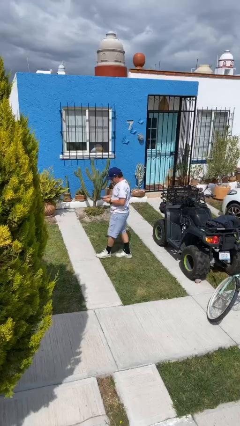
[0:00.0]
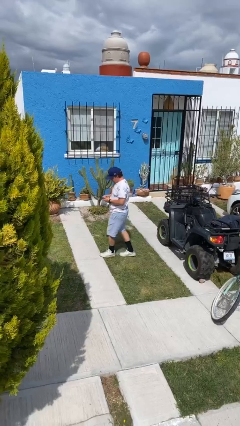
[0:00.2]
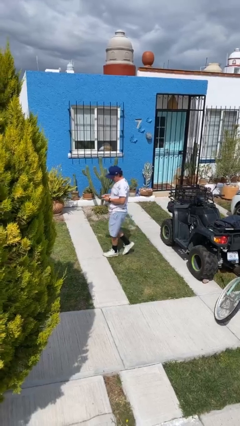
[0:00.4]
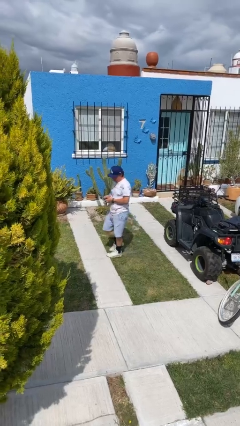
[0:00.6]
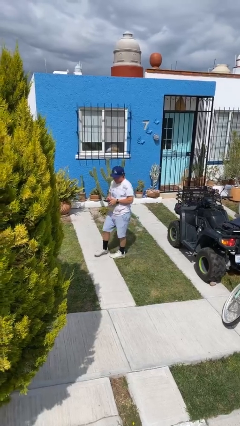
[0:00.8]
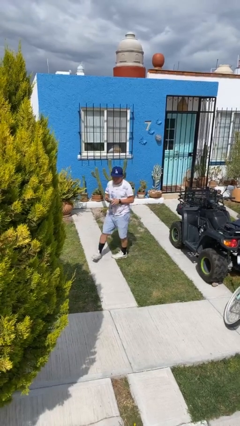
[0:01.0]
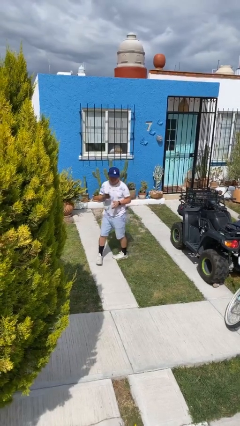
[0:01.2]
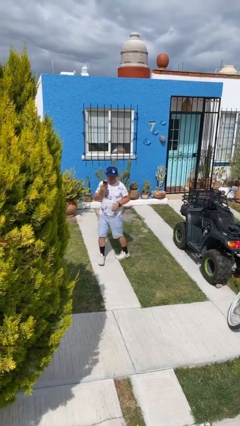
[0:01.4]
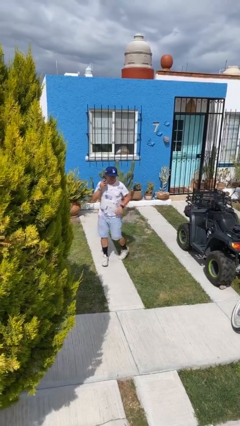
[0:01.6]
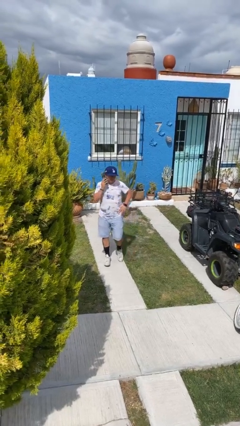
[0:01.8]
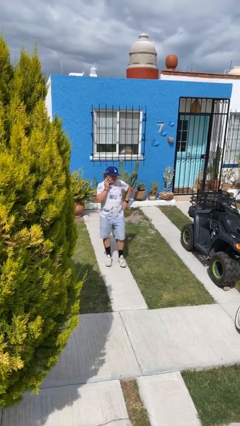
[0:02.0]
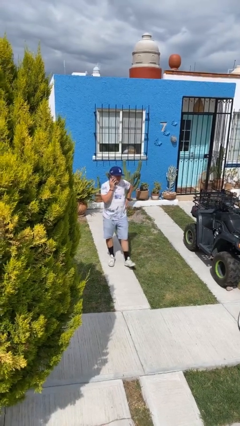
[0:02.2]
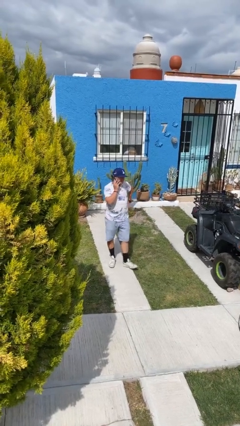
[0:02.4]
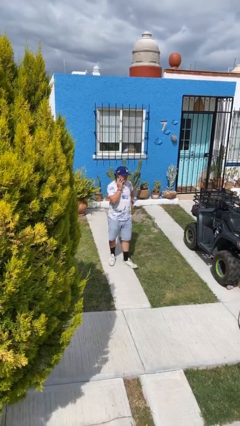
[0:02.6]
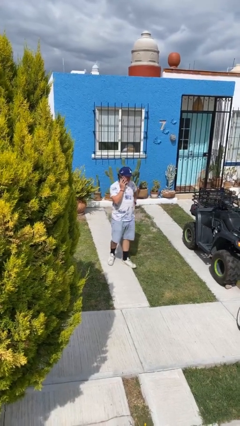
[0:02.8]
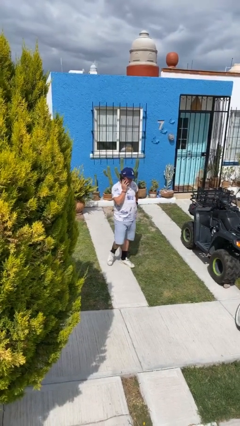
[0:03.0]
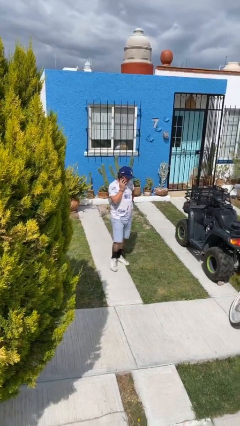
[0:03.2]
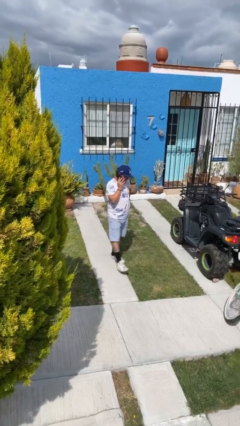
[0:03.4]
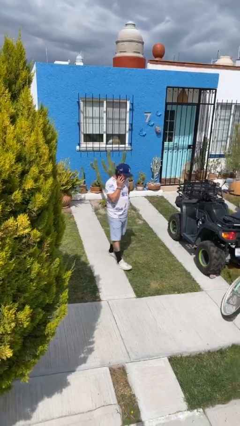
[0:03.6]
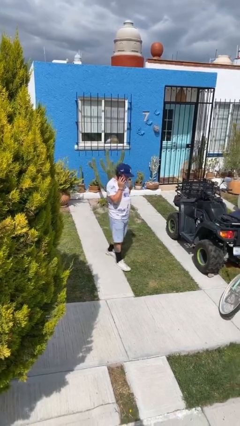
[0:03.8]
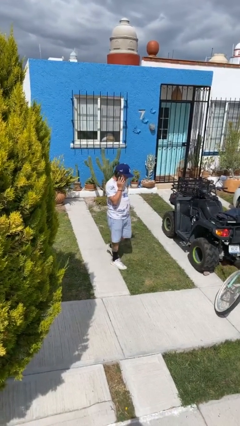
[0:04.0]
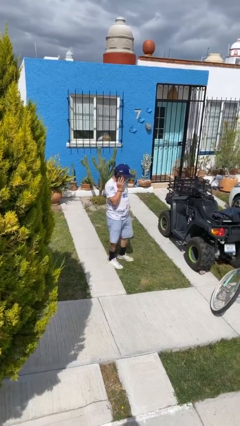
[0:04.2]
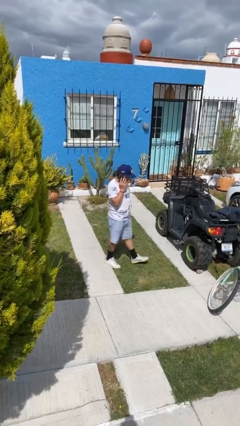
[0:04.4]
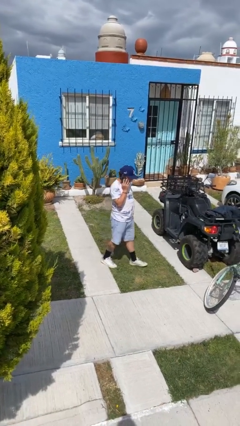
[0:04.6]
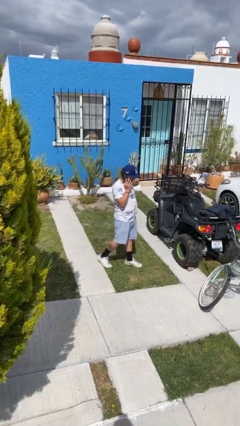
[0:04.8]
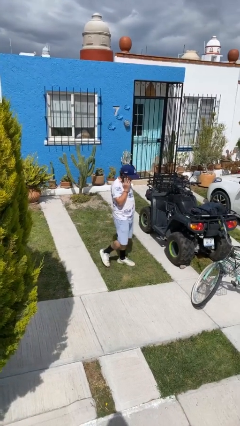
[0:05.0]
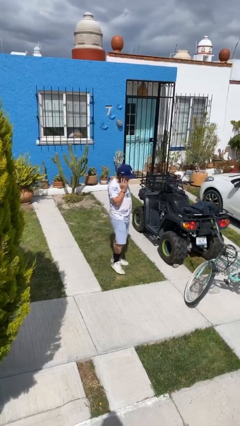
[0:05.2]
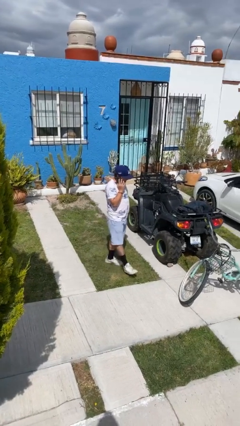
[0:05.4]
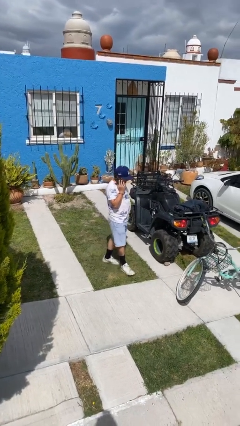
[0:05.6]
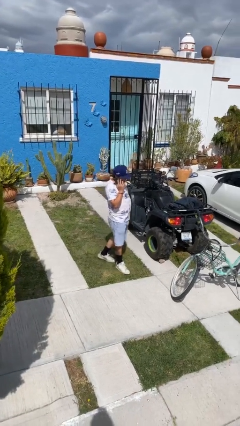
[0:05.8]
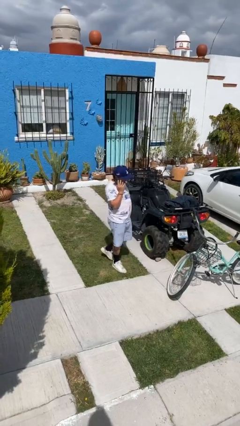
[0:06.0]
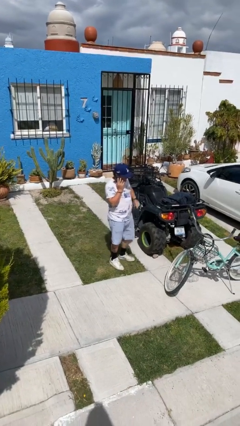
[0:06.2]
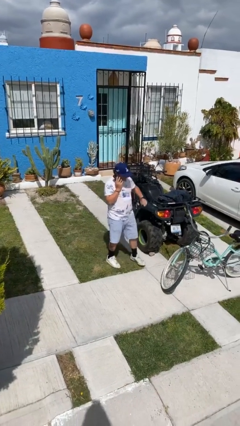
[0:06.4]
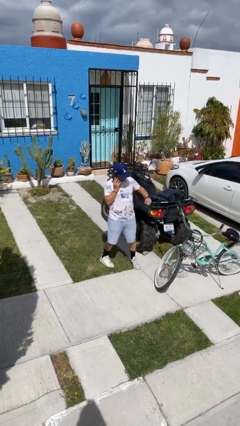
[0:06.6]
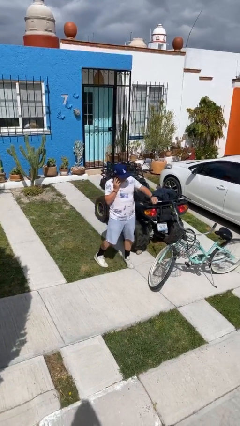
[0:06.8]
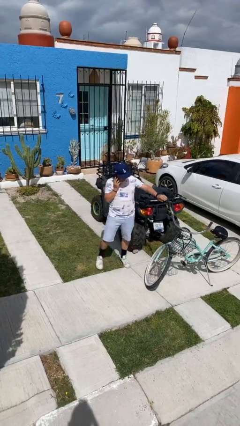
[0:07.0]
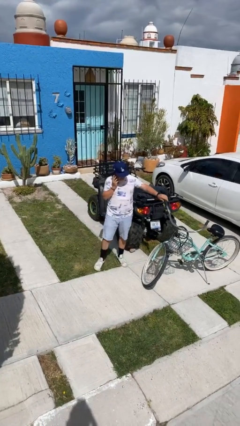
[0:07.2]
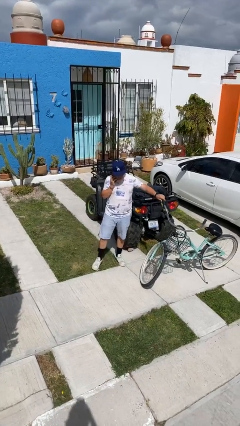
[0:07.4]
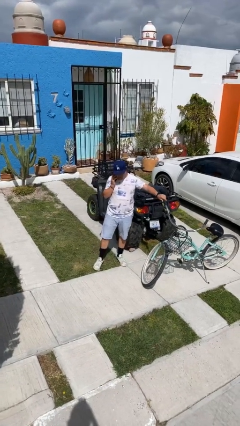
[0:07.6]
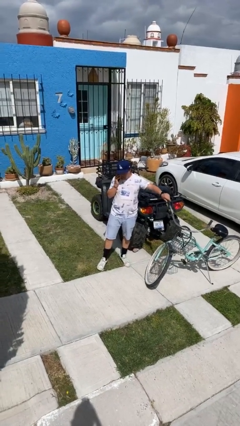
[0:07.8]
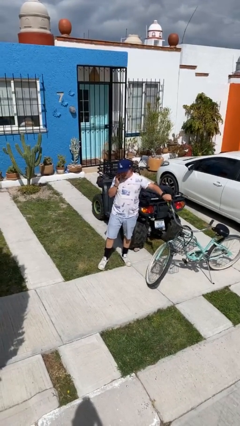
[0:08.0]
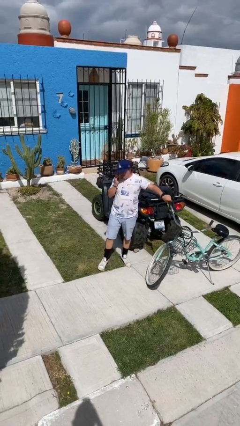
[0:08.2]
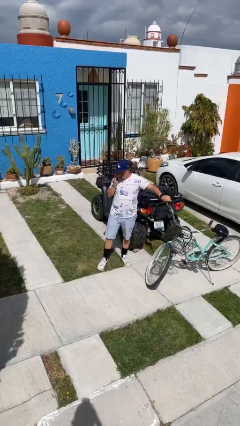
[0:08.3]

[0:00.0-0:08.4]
person talks on phone

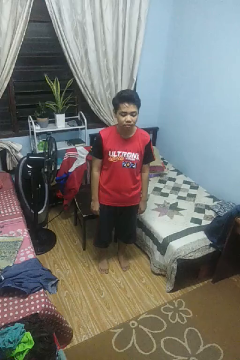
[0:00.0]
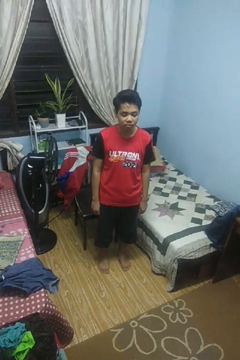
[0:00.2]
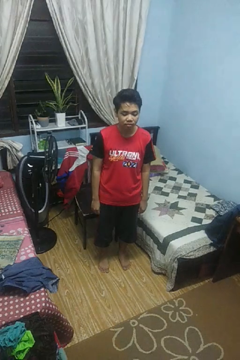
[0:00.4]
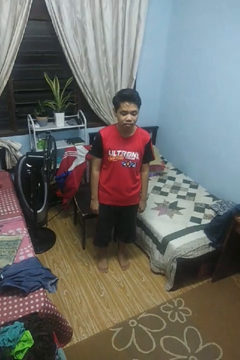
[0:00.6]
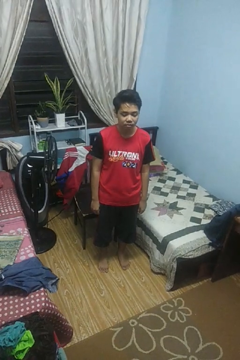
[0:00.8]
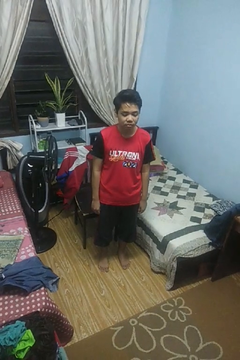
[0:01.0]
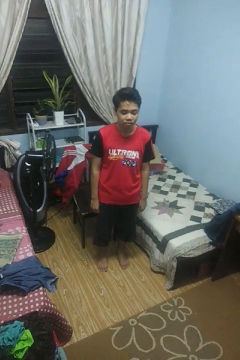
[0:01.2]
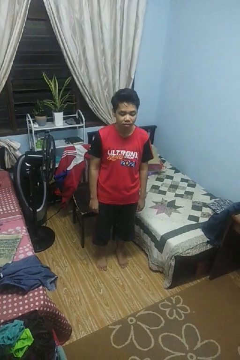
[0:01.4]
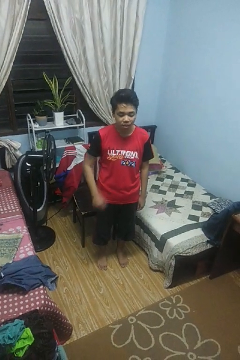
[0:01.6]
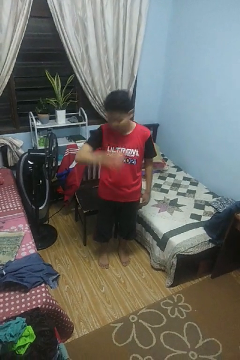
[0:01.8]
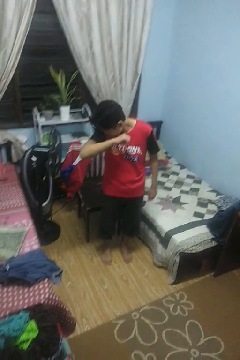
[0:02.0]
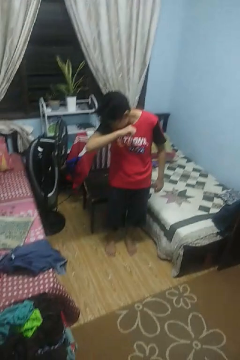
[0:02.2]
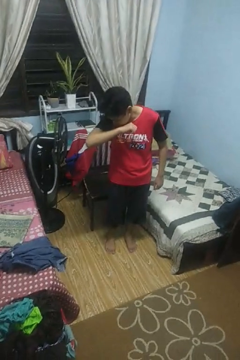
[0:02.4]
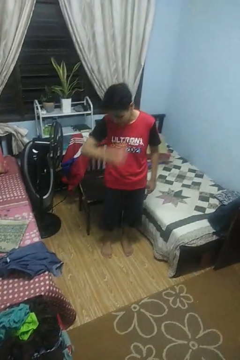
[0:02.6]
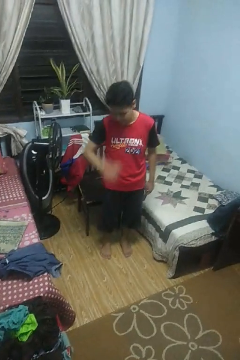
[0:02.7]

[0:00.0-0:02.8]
person sneezes into arm

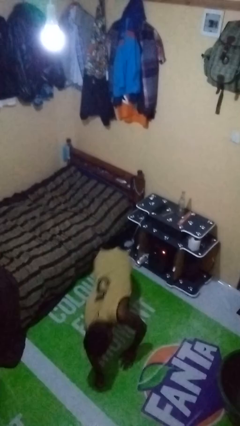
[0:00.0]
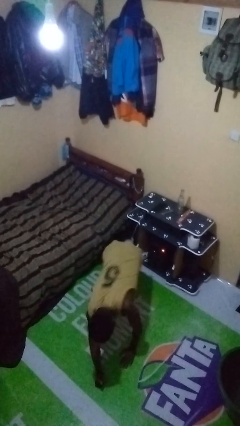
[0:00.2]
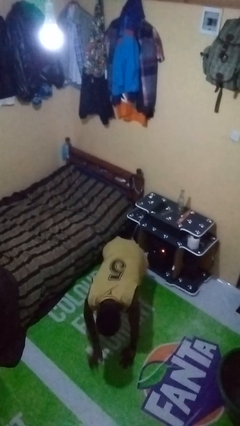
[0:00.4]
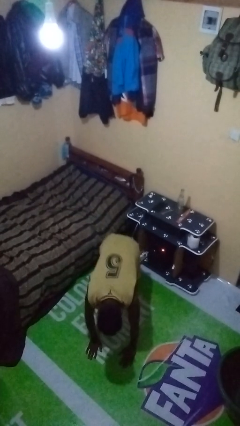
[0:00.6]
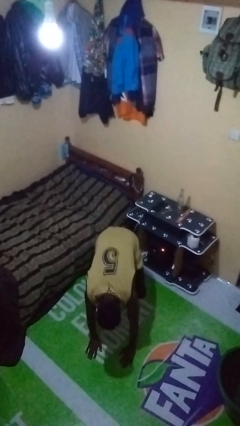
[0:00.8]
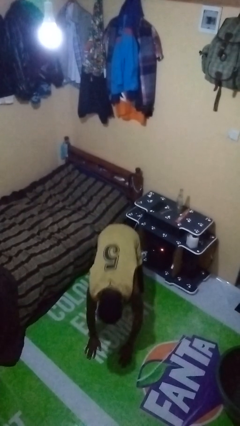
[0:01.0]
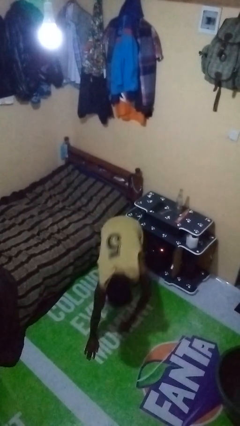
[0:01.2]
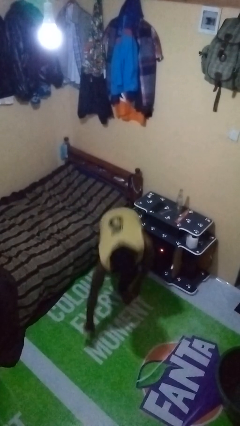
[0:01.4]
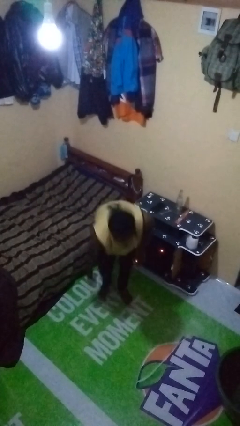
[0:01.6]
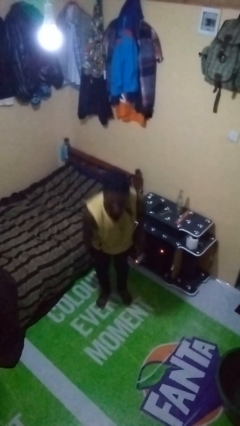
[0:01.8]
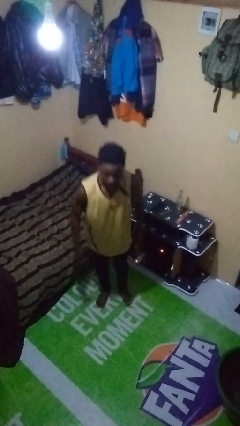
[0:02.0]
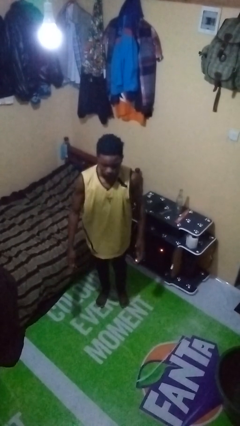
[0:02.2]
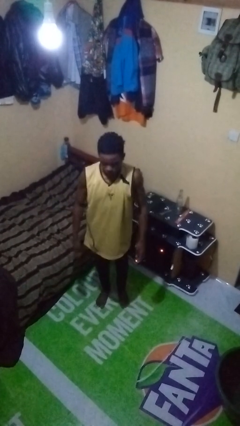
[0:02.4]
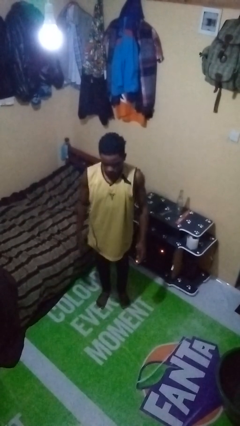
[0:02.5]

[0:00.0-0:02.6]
person stands up from floor

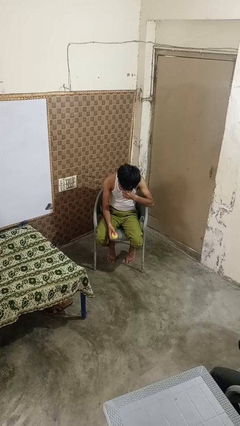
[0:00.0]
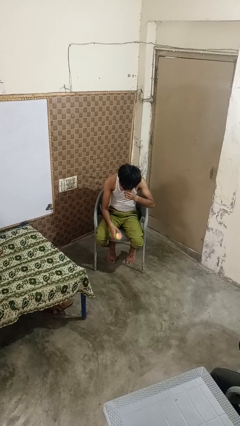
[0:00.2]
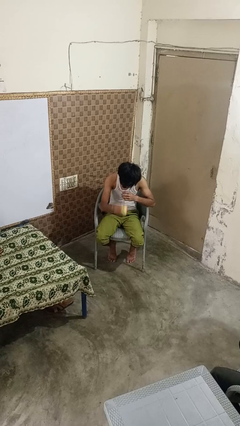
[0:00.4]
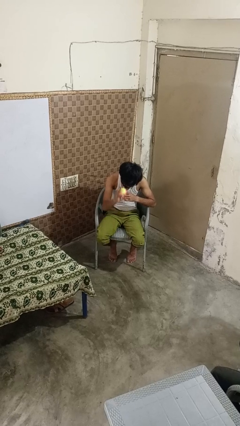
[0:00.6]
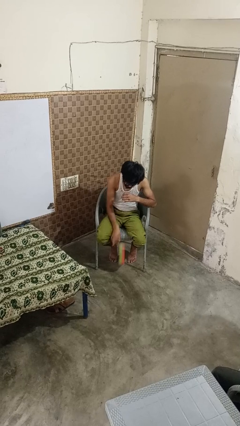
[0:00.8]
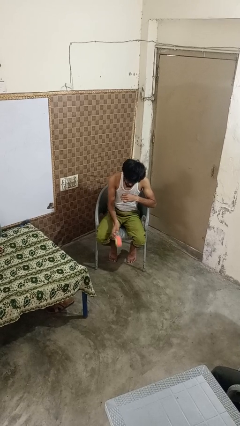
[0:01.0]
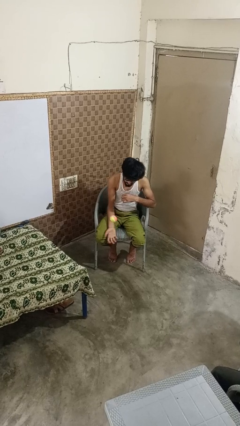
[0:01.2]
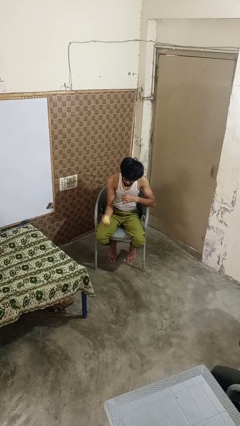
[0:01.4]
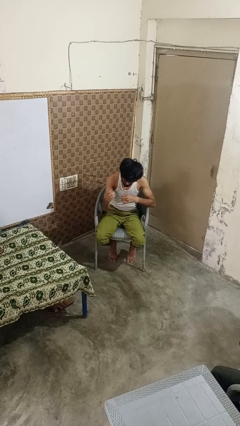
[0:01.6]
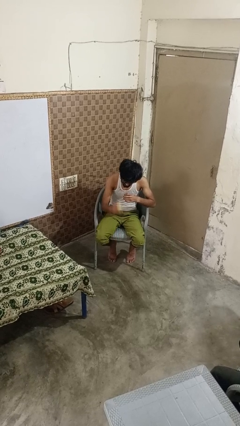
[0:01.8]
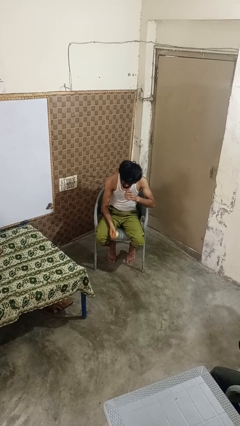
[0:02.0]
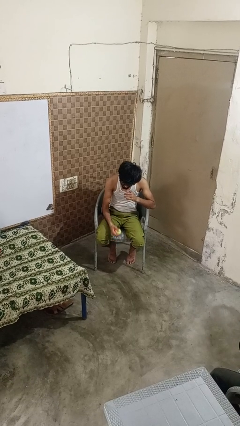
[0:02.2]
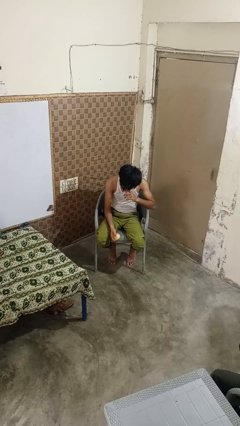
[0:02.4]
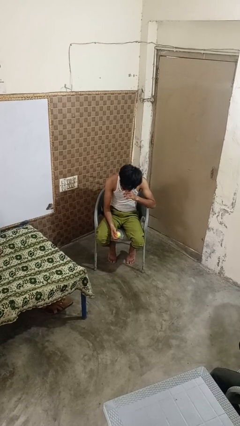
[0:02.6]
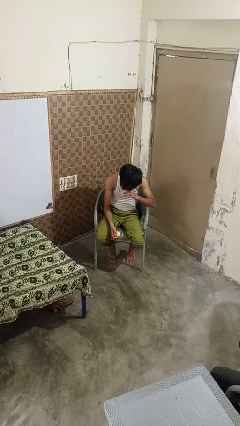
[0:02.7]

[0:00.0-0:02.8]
person bounces ball on floor

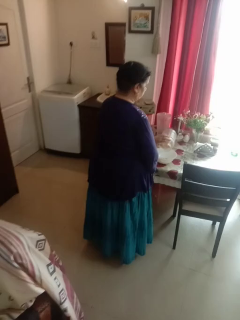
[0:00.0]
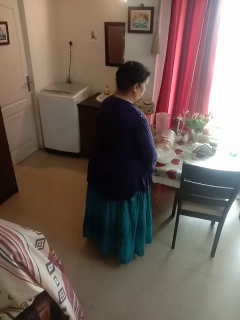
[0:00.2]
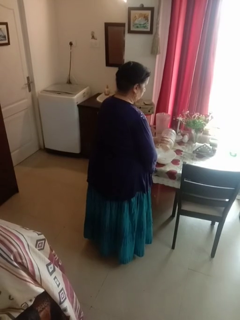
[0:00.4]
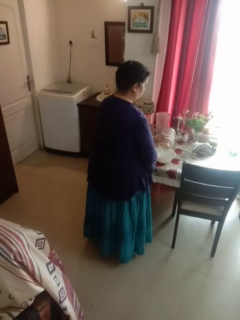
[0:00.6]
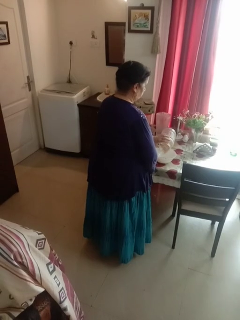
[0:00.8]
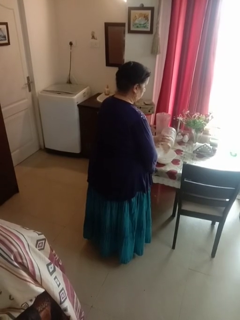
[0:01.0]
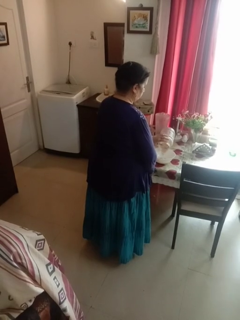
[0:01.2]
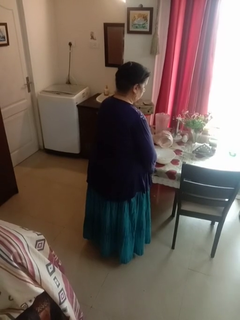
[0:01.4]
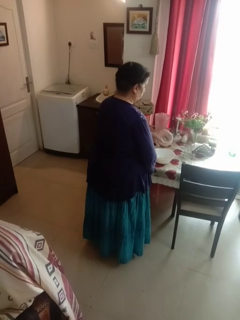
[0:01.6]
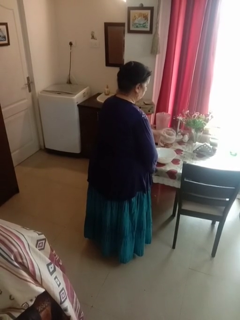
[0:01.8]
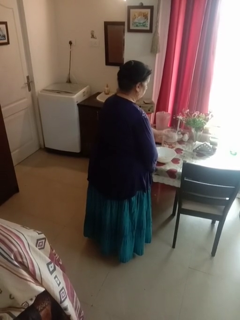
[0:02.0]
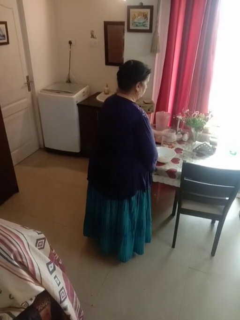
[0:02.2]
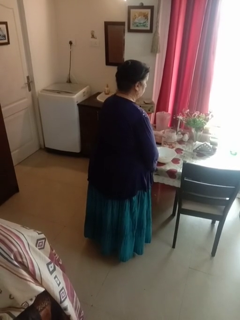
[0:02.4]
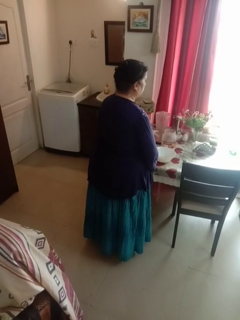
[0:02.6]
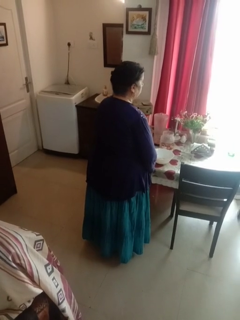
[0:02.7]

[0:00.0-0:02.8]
person pours into bowl
